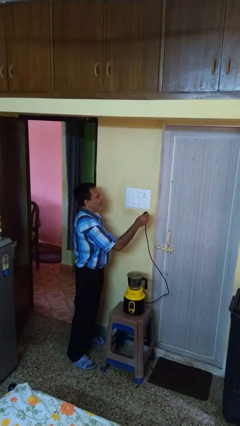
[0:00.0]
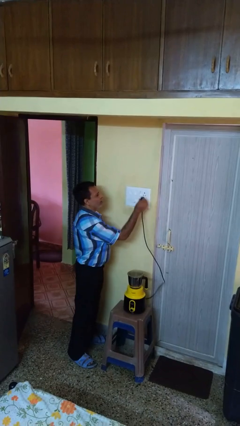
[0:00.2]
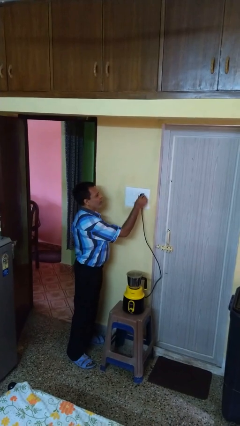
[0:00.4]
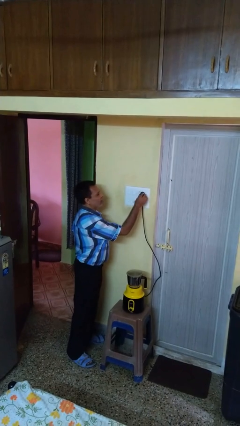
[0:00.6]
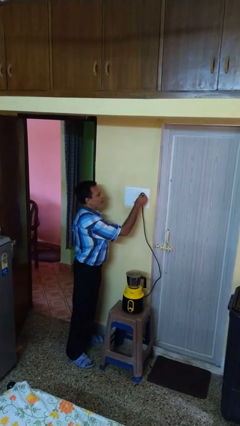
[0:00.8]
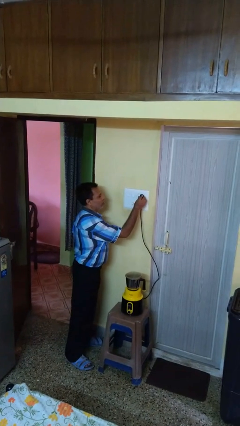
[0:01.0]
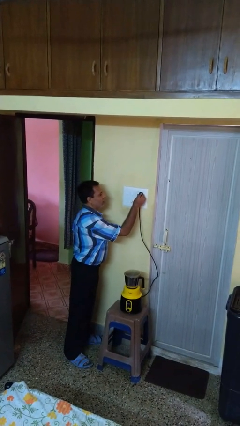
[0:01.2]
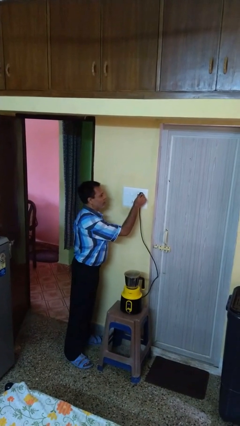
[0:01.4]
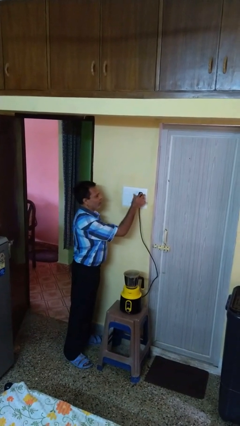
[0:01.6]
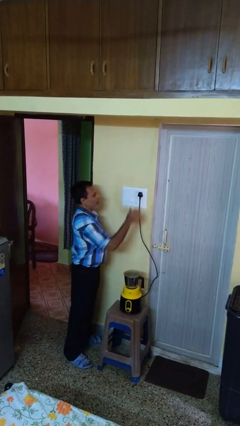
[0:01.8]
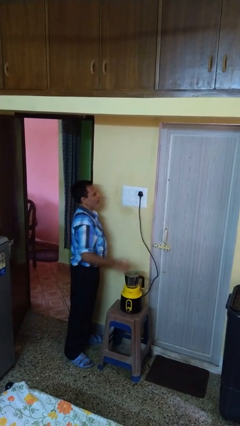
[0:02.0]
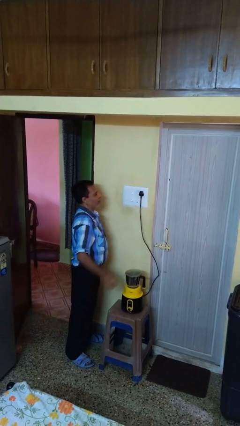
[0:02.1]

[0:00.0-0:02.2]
person plugs into electrical socket

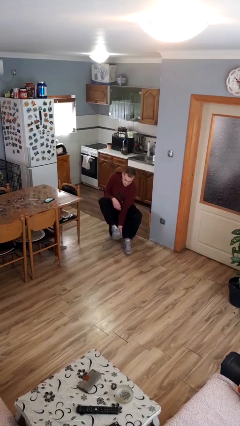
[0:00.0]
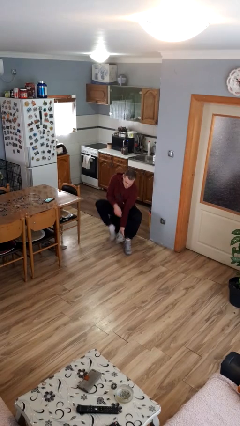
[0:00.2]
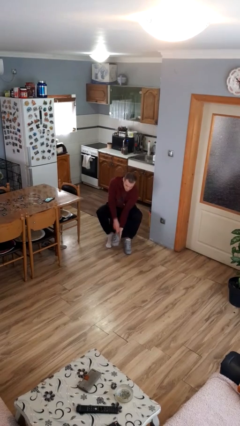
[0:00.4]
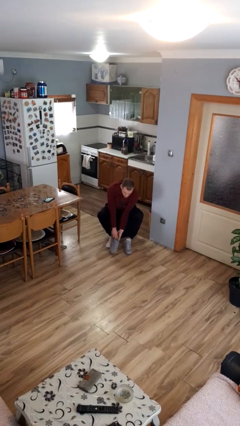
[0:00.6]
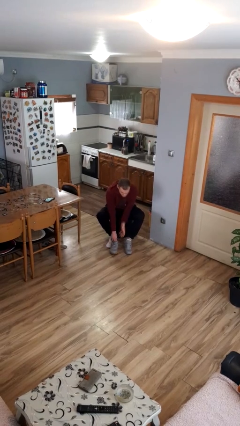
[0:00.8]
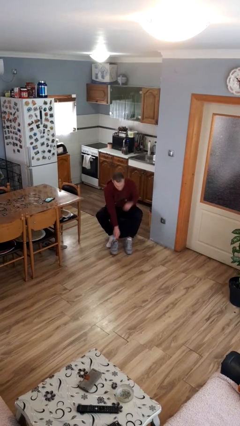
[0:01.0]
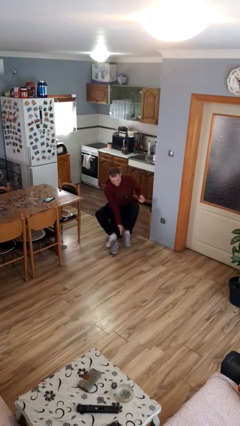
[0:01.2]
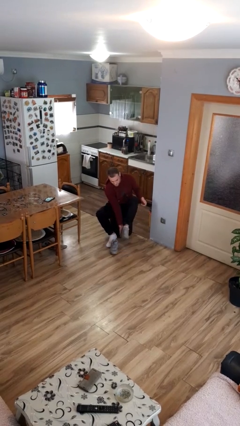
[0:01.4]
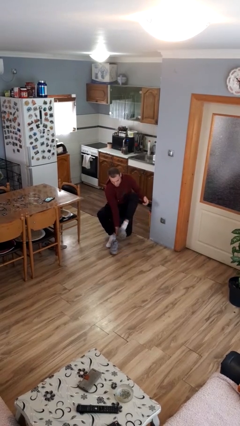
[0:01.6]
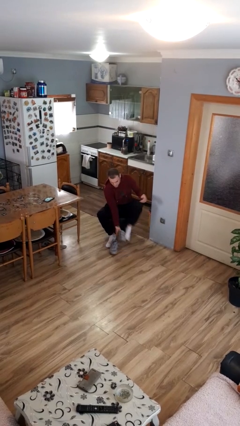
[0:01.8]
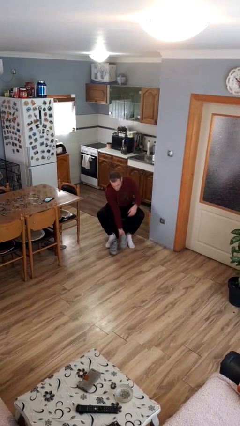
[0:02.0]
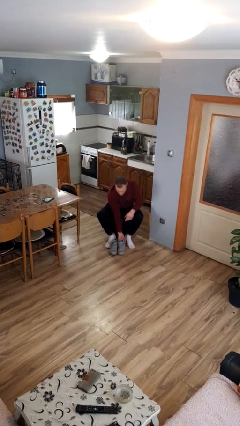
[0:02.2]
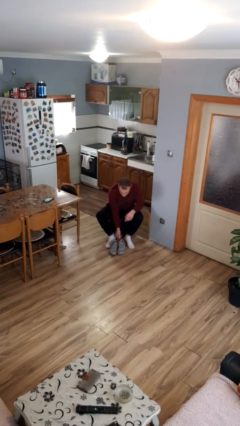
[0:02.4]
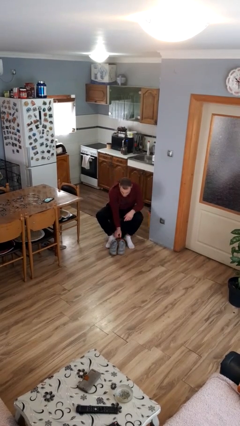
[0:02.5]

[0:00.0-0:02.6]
person takes off shoes

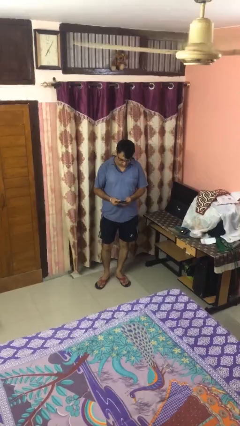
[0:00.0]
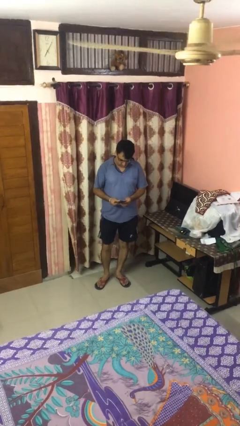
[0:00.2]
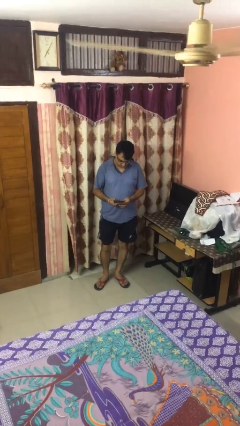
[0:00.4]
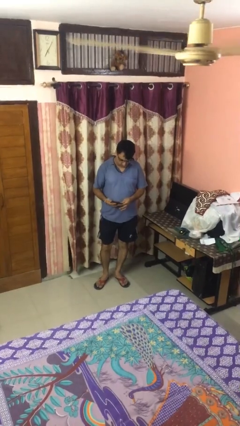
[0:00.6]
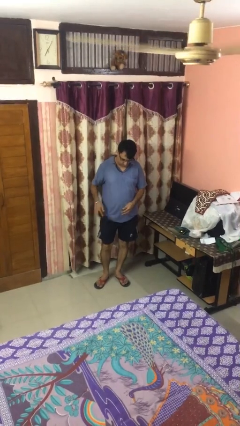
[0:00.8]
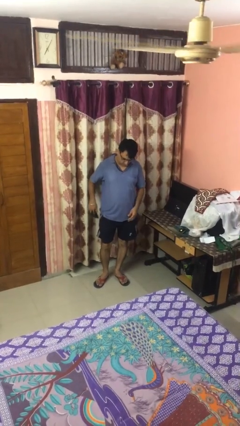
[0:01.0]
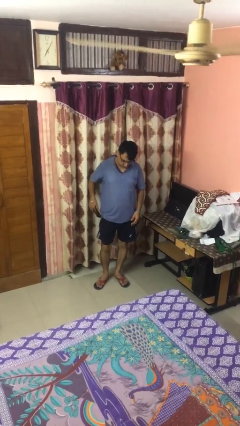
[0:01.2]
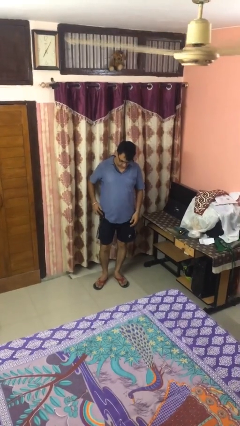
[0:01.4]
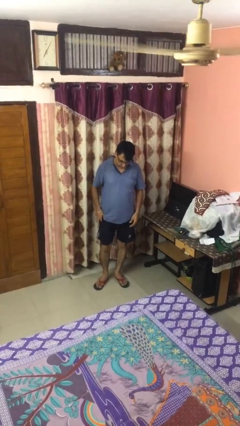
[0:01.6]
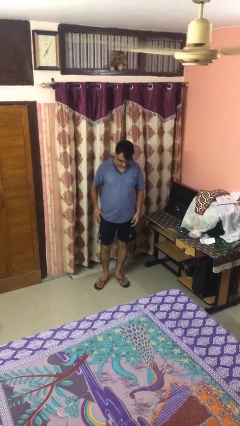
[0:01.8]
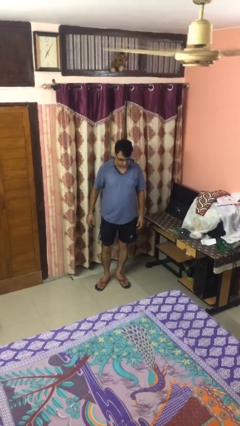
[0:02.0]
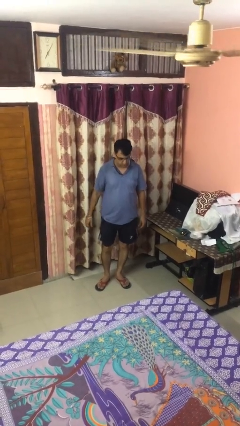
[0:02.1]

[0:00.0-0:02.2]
person puts phone into pocket

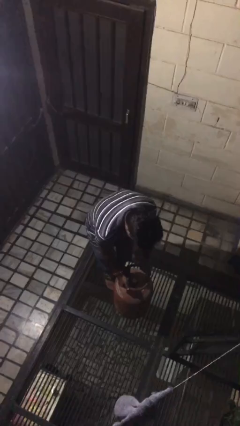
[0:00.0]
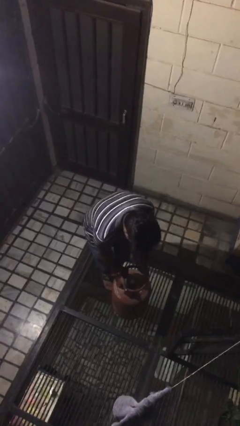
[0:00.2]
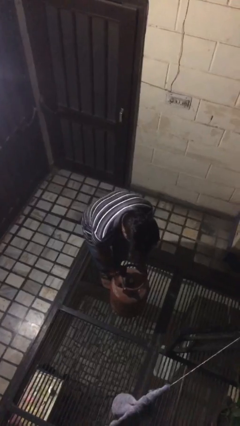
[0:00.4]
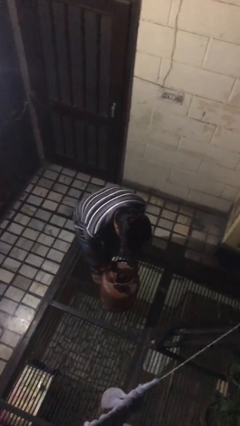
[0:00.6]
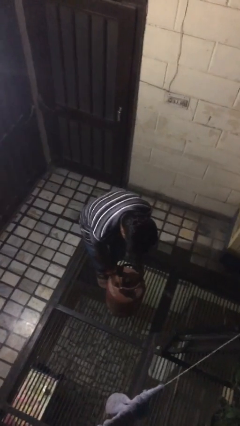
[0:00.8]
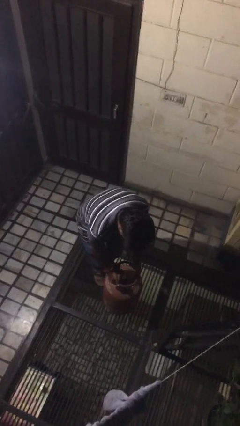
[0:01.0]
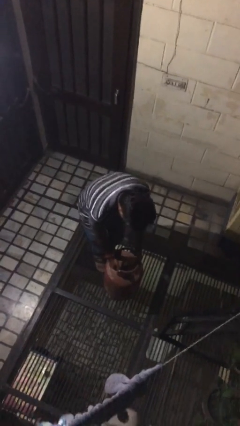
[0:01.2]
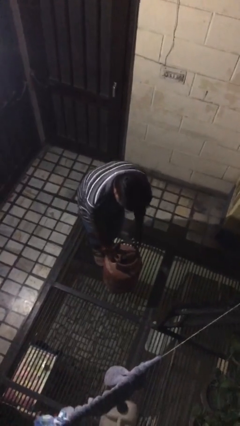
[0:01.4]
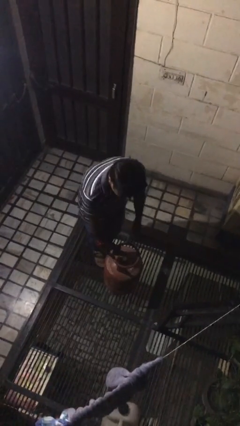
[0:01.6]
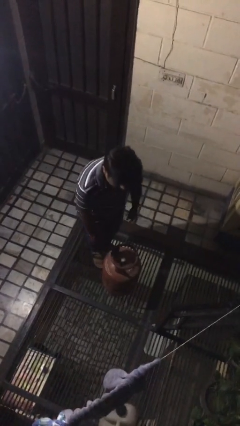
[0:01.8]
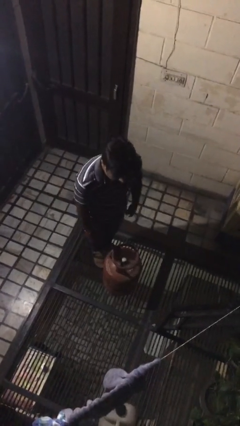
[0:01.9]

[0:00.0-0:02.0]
person puts down object on floor

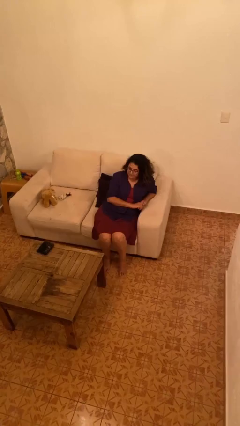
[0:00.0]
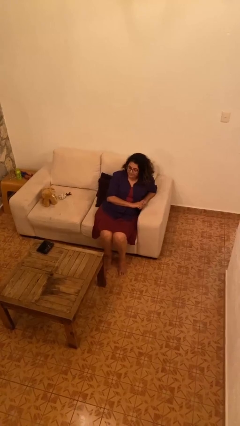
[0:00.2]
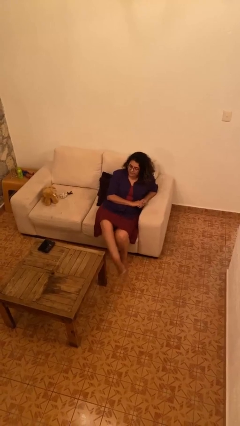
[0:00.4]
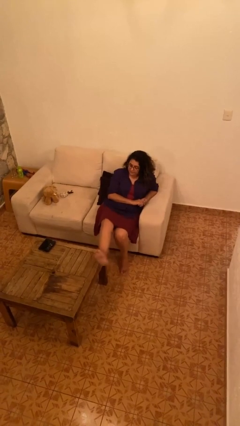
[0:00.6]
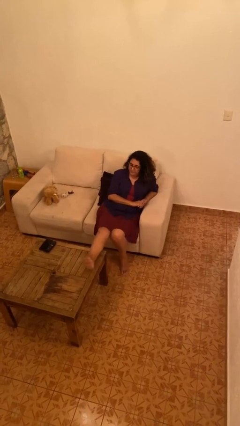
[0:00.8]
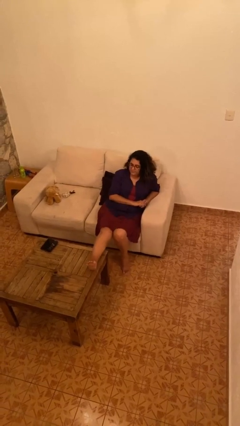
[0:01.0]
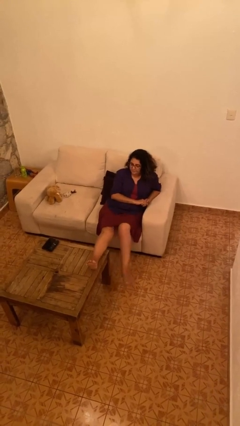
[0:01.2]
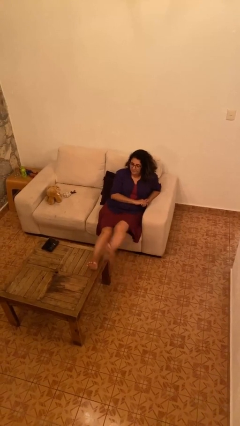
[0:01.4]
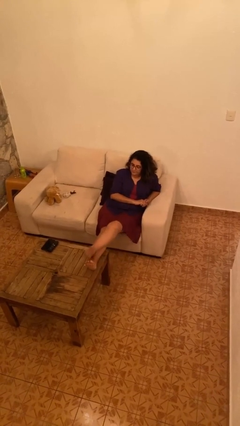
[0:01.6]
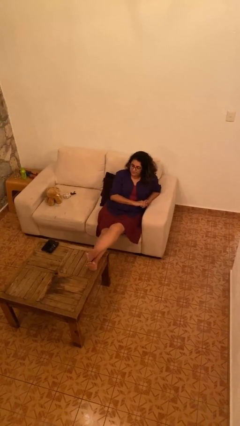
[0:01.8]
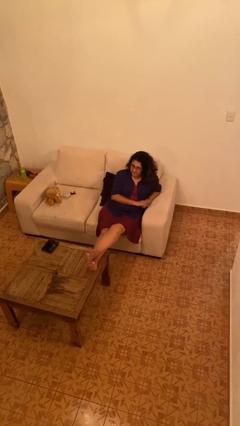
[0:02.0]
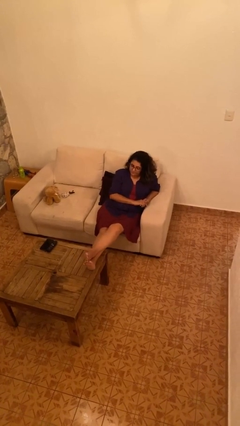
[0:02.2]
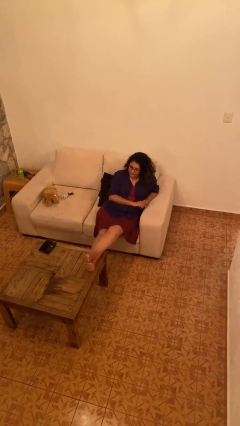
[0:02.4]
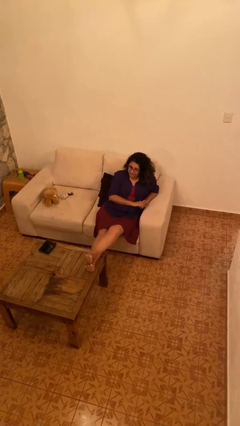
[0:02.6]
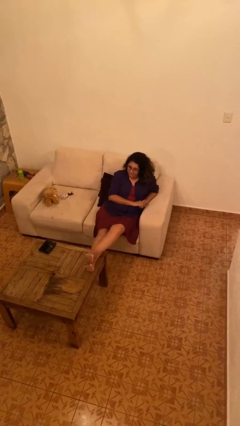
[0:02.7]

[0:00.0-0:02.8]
person puts feet up

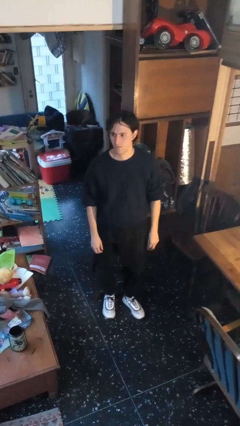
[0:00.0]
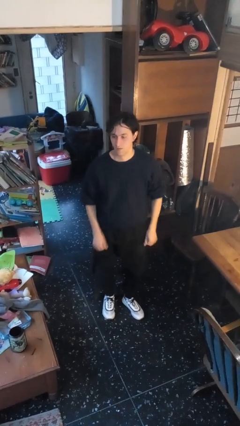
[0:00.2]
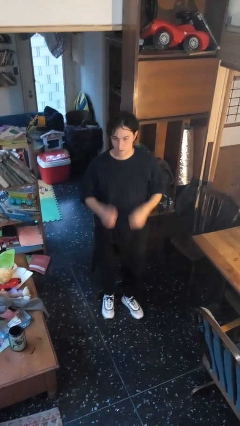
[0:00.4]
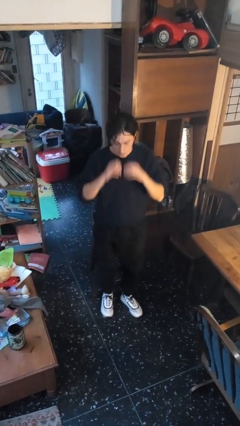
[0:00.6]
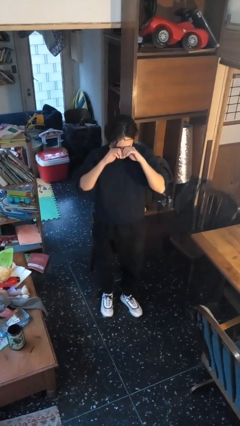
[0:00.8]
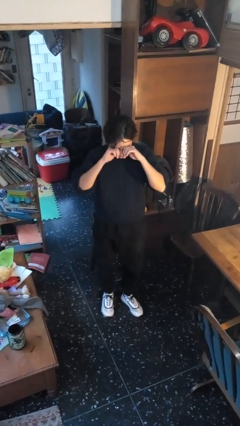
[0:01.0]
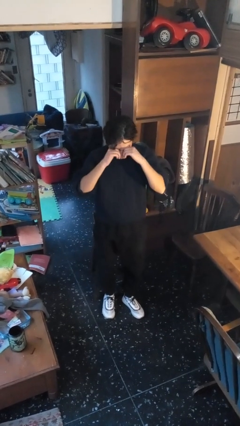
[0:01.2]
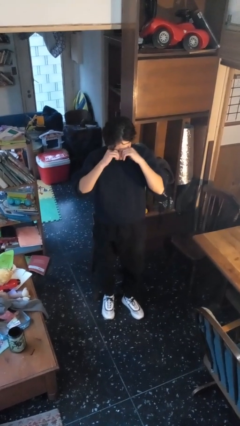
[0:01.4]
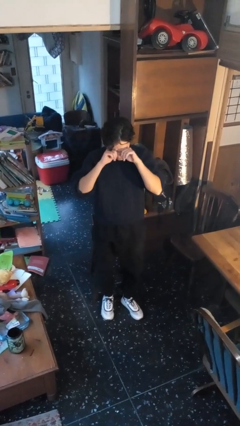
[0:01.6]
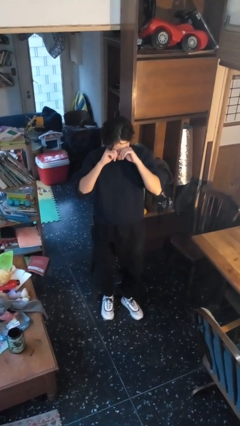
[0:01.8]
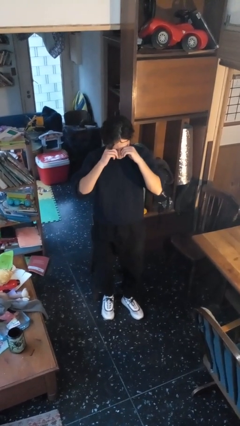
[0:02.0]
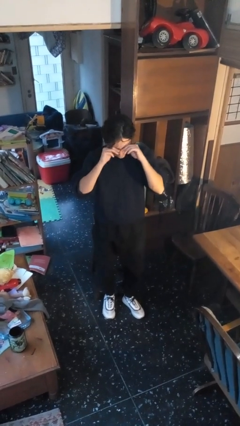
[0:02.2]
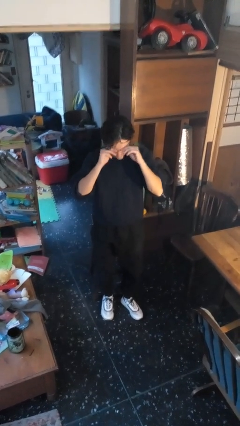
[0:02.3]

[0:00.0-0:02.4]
person rubs eyes

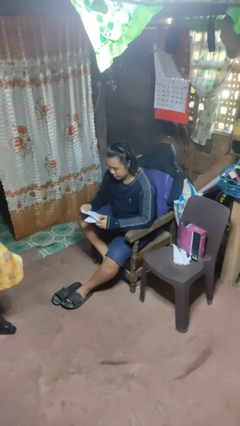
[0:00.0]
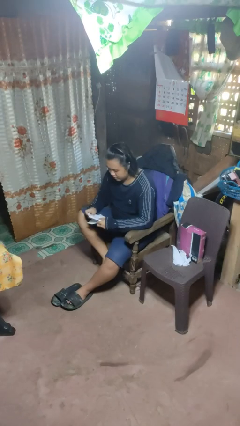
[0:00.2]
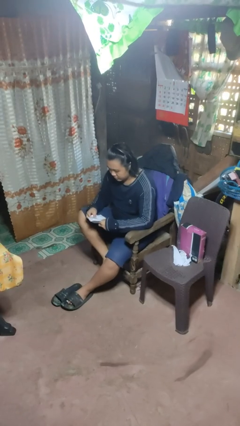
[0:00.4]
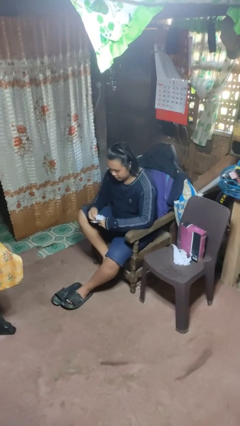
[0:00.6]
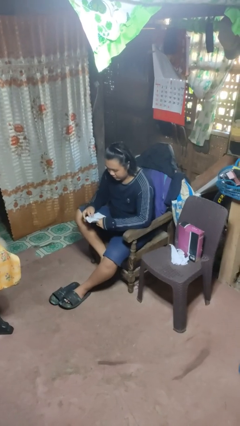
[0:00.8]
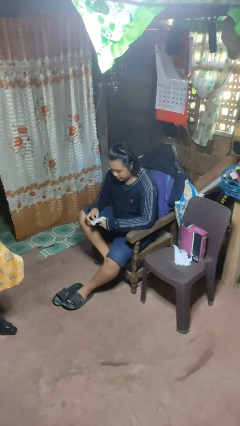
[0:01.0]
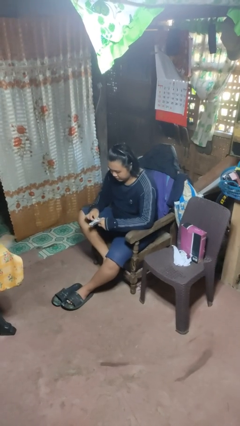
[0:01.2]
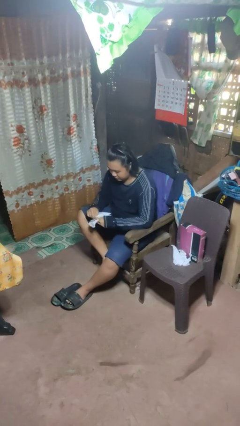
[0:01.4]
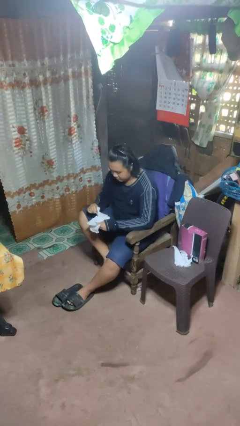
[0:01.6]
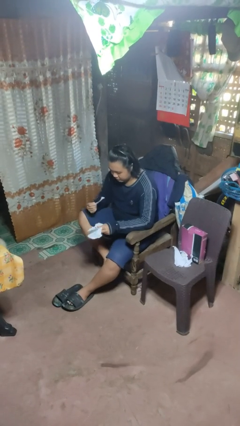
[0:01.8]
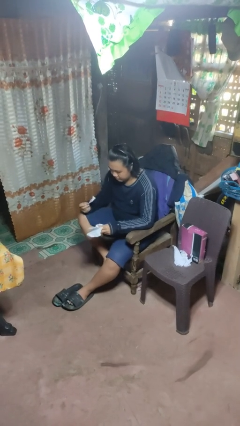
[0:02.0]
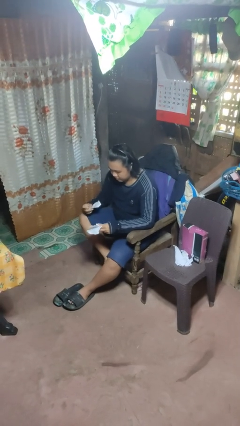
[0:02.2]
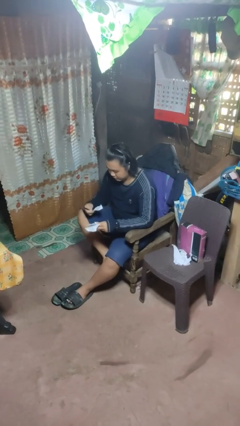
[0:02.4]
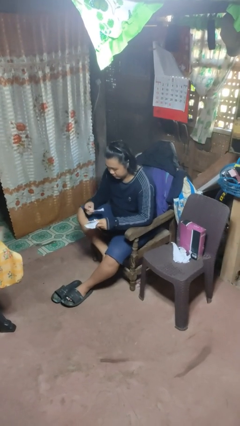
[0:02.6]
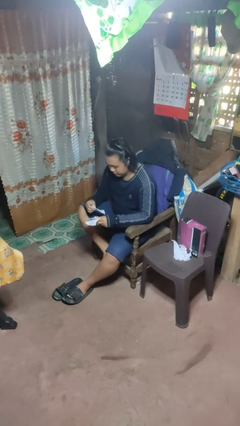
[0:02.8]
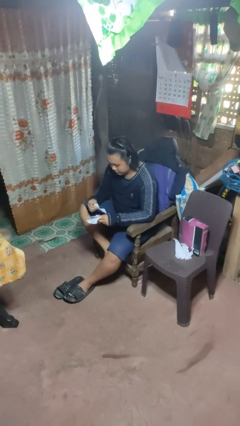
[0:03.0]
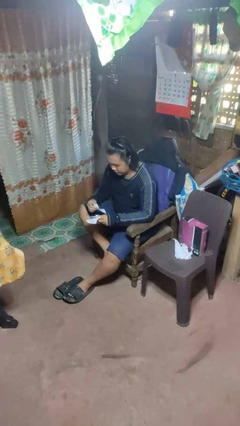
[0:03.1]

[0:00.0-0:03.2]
person tears paper
